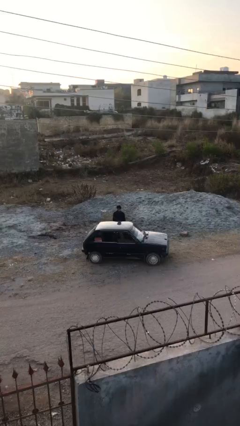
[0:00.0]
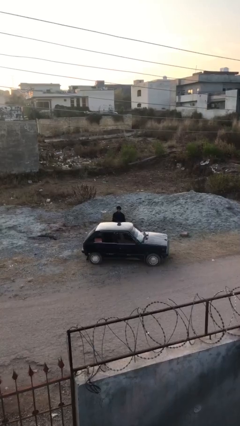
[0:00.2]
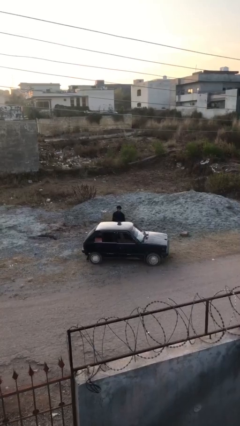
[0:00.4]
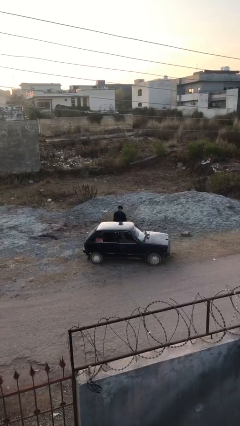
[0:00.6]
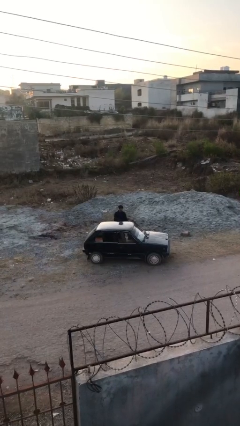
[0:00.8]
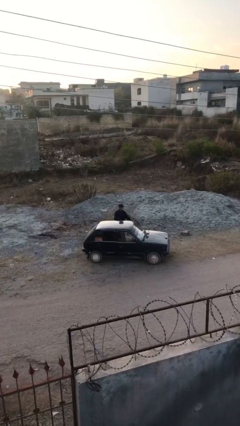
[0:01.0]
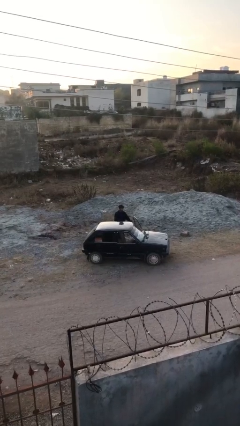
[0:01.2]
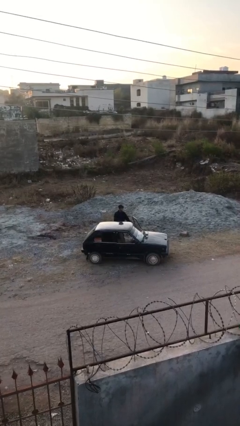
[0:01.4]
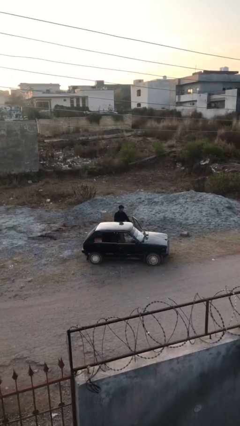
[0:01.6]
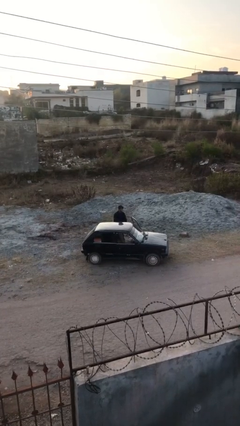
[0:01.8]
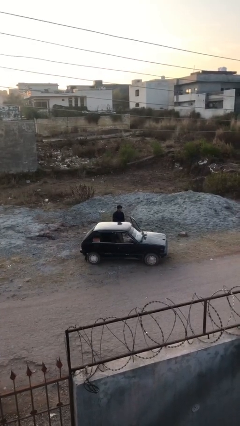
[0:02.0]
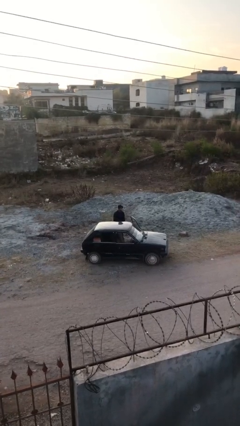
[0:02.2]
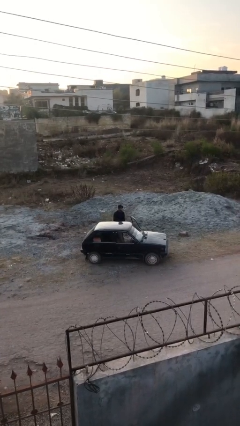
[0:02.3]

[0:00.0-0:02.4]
person opens car door

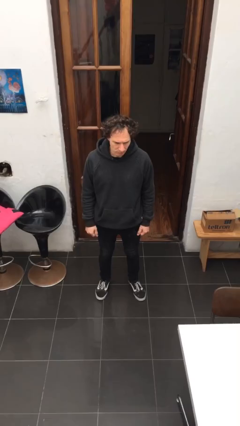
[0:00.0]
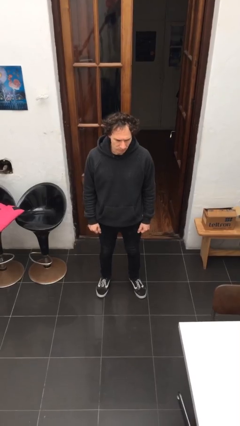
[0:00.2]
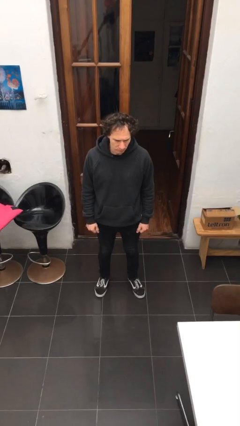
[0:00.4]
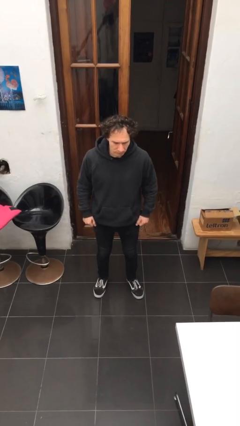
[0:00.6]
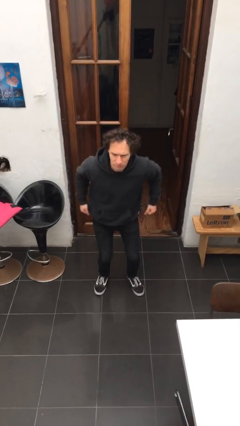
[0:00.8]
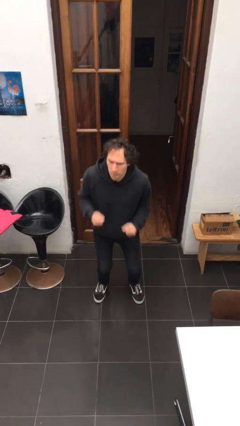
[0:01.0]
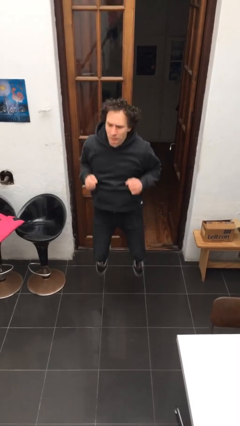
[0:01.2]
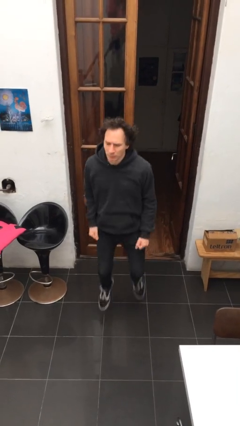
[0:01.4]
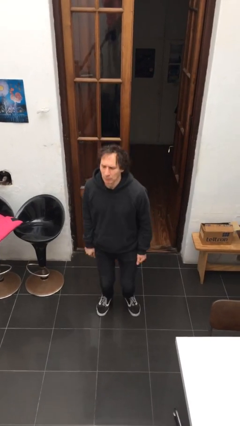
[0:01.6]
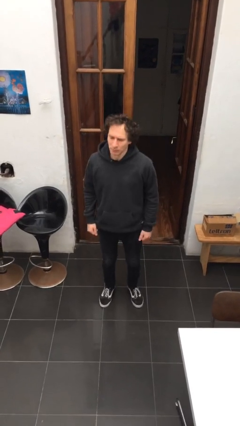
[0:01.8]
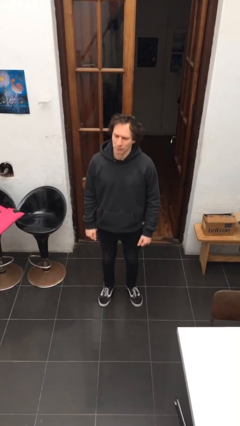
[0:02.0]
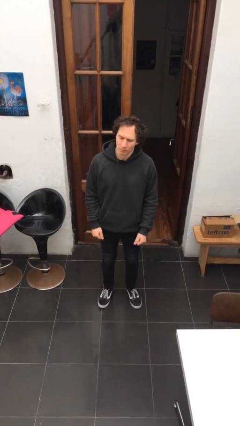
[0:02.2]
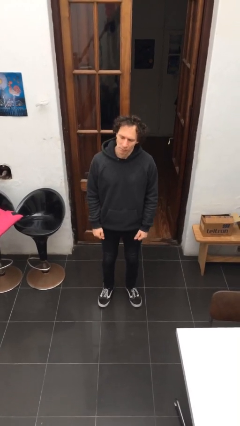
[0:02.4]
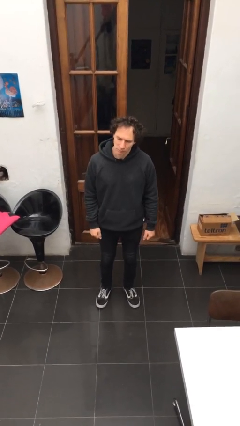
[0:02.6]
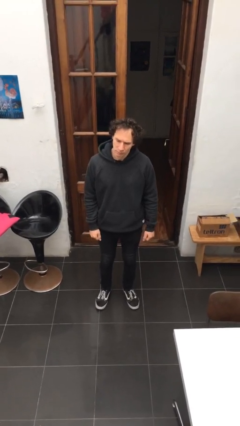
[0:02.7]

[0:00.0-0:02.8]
person jumps

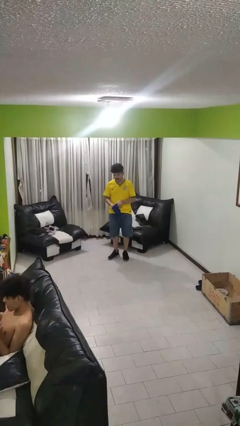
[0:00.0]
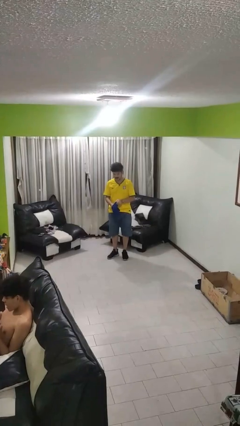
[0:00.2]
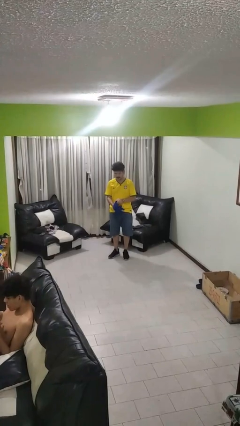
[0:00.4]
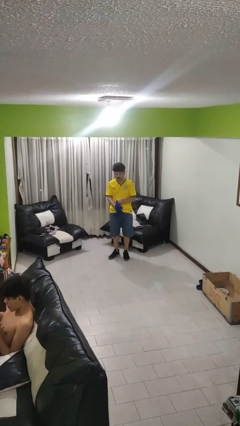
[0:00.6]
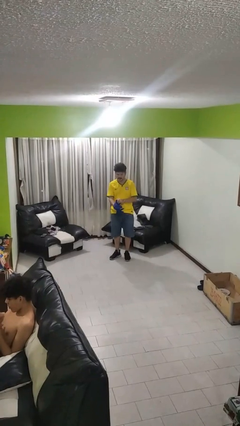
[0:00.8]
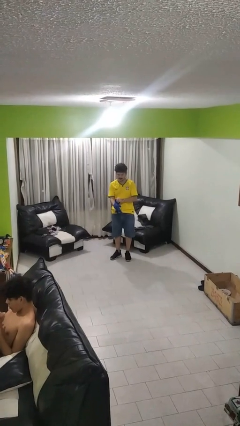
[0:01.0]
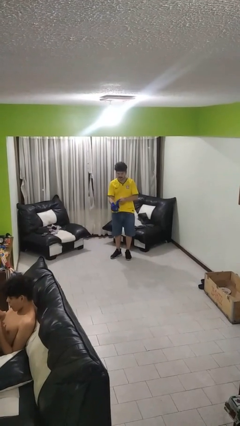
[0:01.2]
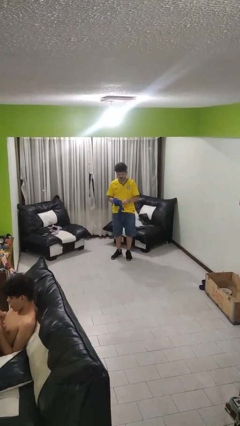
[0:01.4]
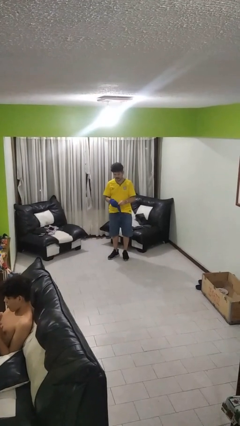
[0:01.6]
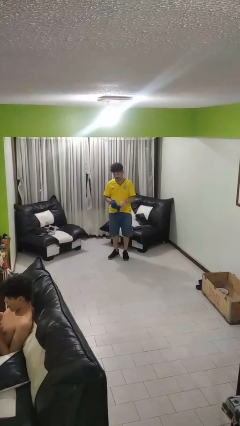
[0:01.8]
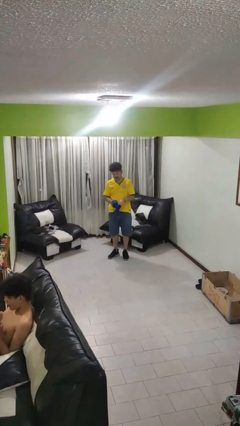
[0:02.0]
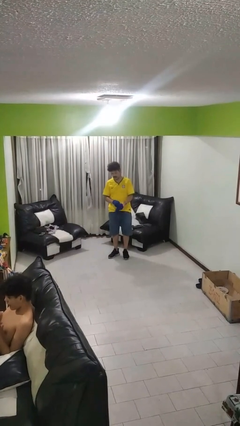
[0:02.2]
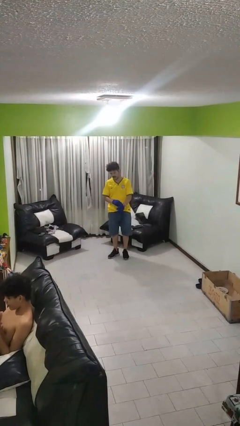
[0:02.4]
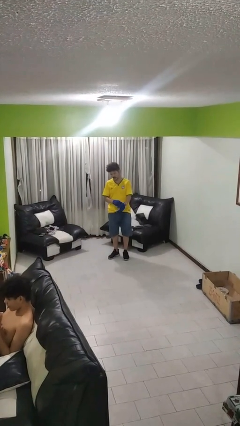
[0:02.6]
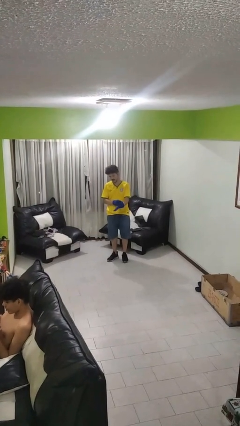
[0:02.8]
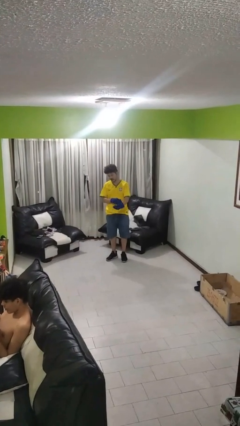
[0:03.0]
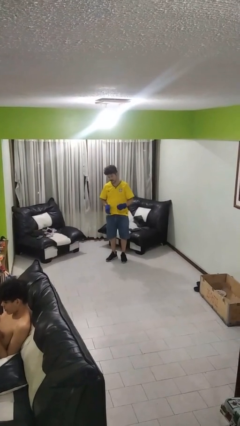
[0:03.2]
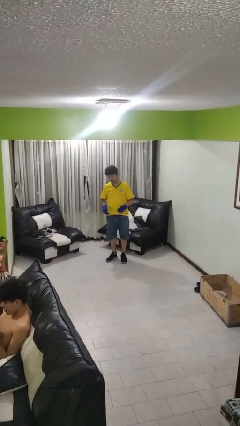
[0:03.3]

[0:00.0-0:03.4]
person puts on gloves

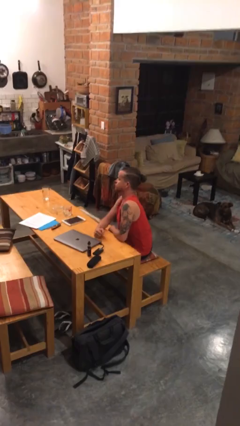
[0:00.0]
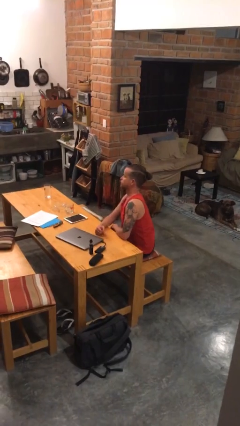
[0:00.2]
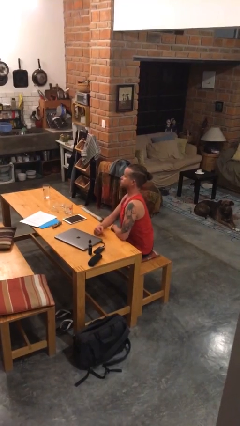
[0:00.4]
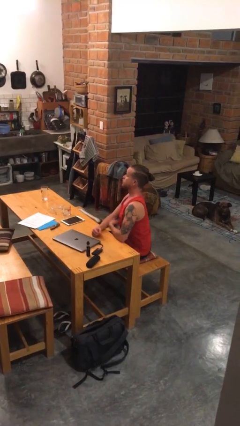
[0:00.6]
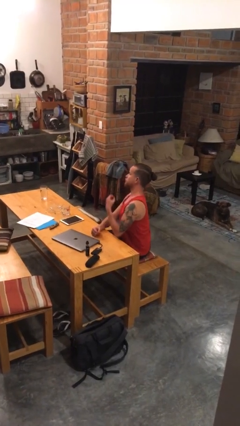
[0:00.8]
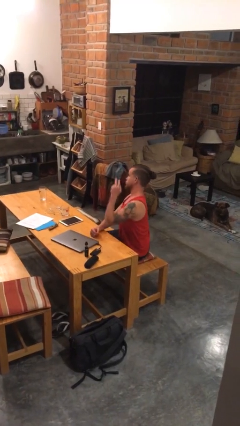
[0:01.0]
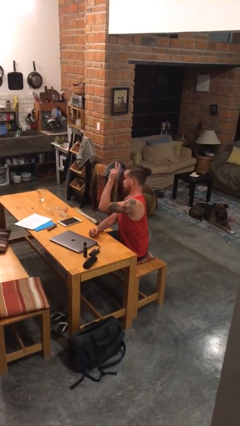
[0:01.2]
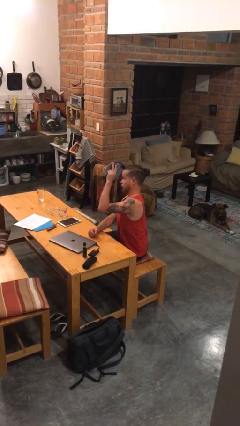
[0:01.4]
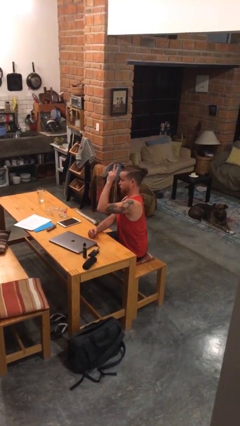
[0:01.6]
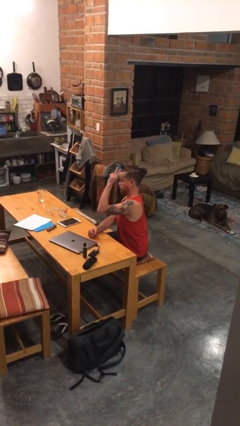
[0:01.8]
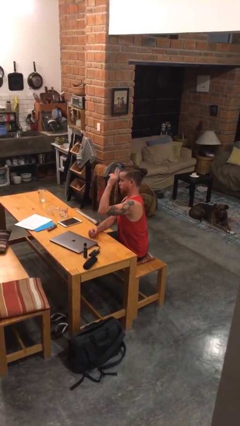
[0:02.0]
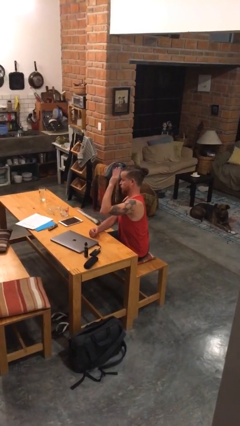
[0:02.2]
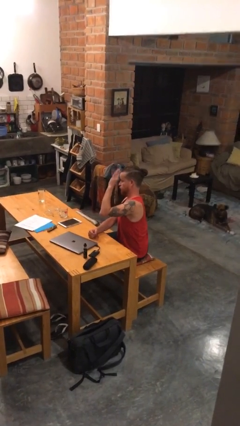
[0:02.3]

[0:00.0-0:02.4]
person gestures raise hand

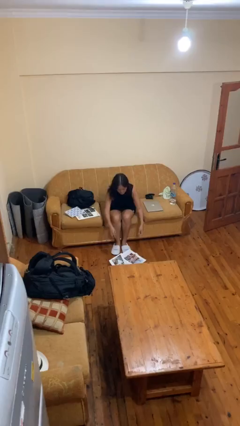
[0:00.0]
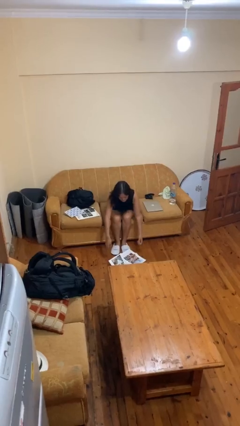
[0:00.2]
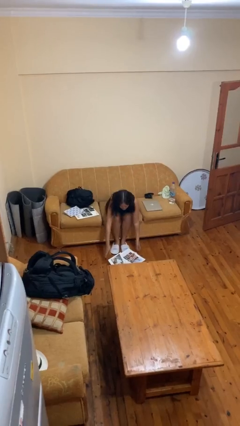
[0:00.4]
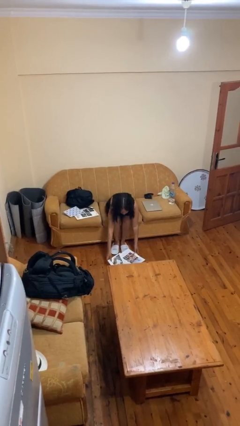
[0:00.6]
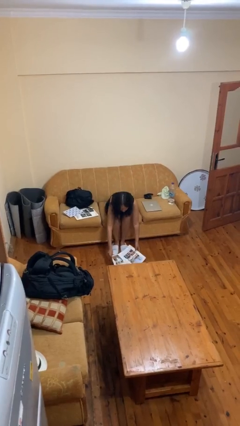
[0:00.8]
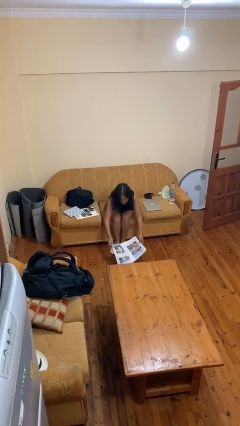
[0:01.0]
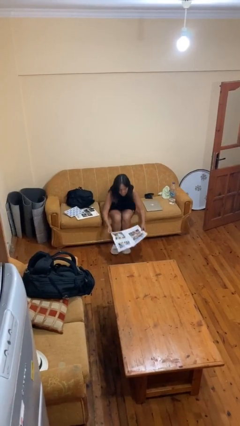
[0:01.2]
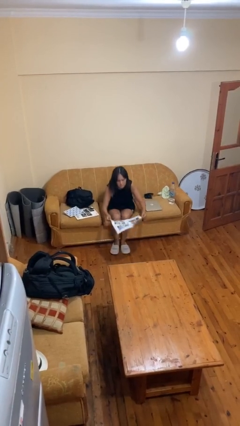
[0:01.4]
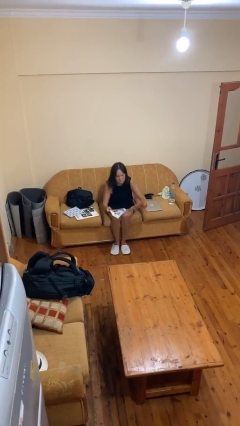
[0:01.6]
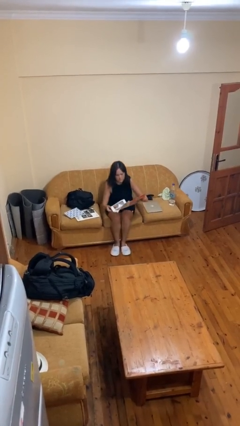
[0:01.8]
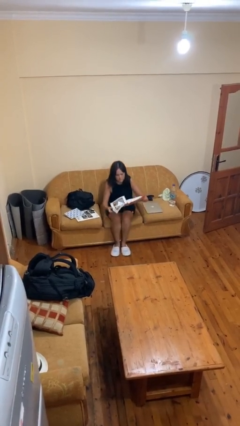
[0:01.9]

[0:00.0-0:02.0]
person picks up object from floor

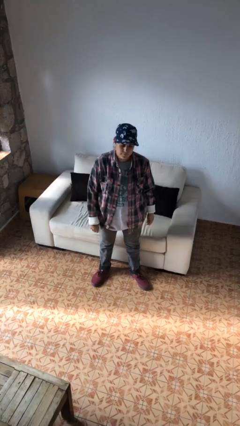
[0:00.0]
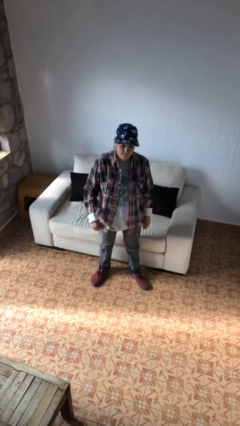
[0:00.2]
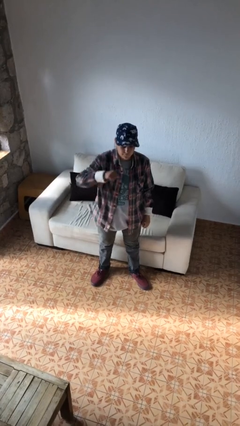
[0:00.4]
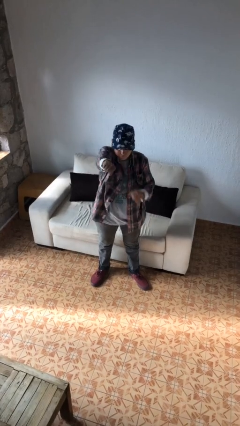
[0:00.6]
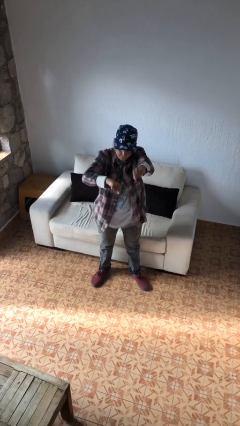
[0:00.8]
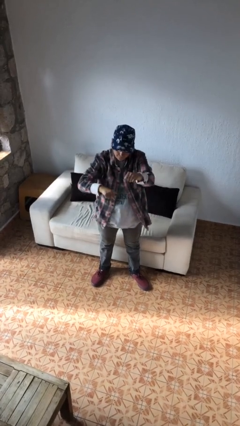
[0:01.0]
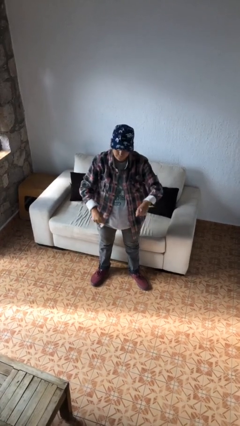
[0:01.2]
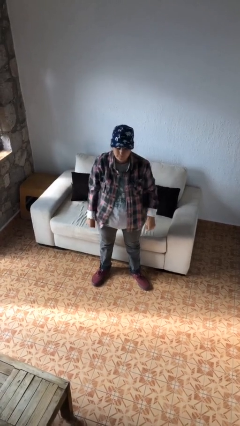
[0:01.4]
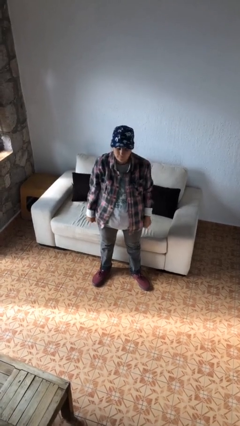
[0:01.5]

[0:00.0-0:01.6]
person punches

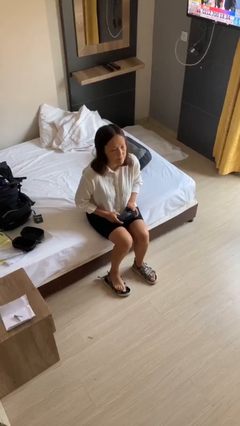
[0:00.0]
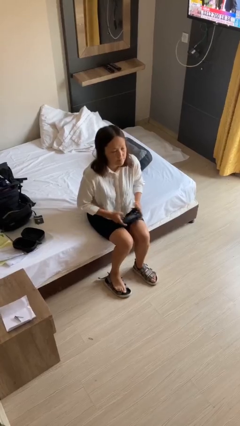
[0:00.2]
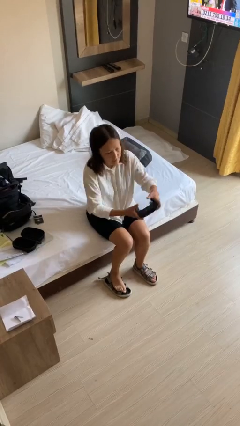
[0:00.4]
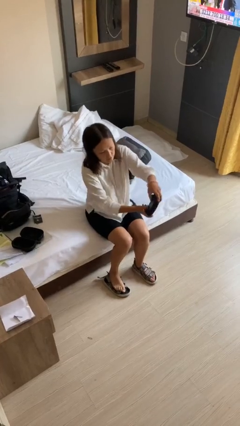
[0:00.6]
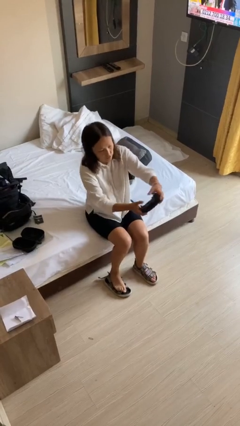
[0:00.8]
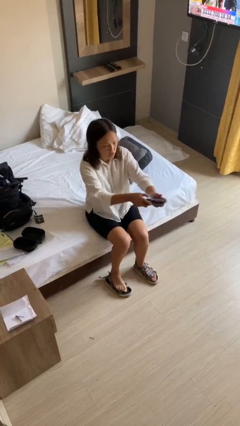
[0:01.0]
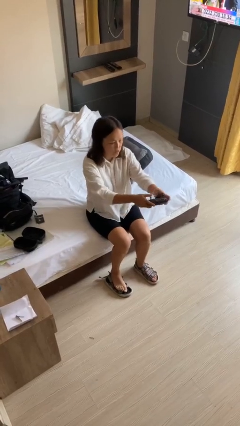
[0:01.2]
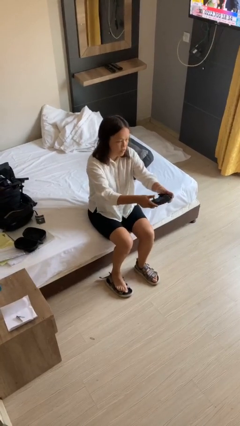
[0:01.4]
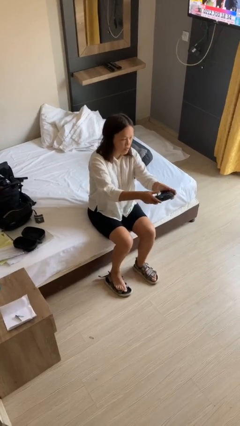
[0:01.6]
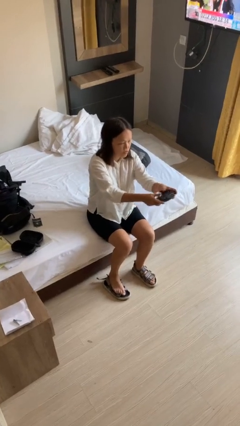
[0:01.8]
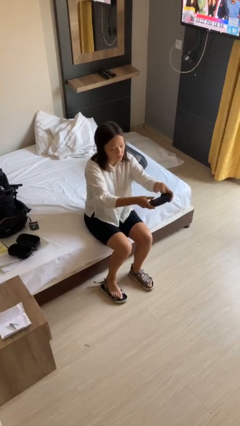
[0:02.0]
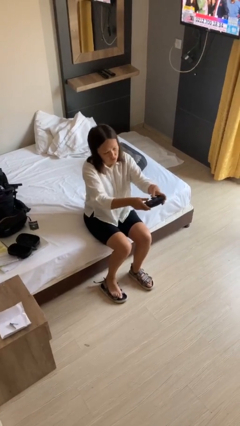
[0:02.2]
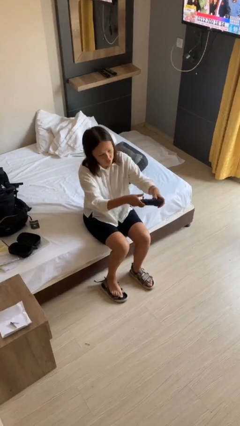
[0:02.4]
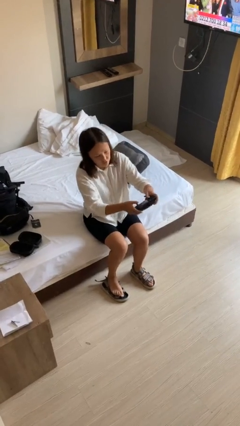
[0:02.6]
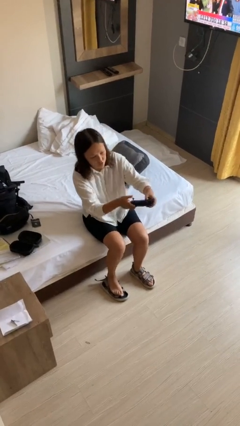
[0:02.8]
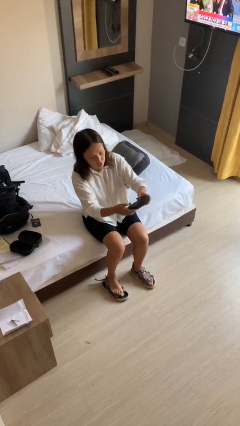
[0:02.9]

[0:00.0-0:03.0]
person interacts with handheld game
